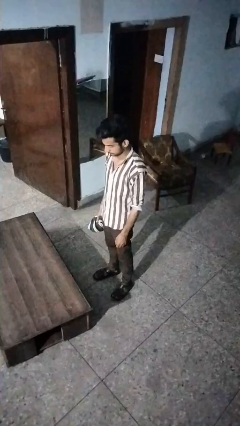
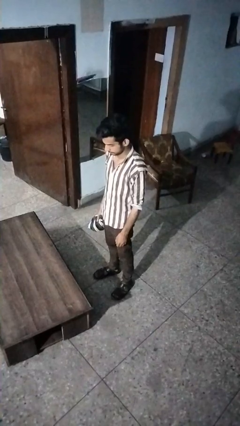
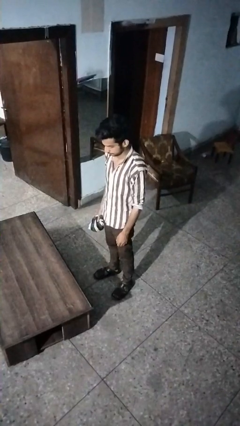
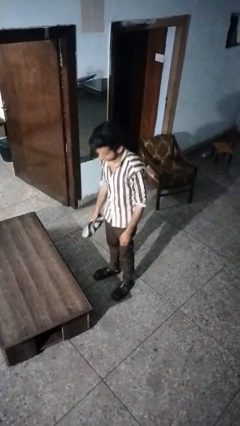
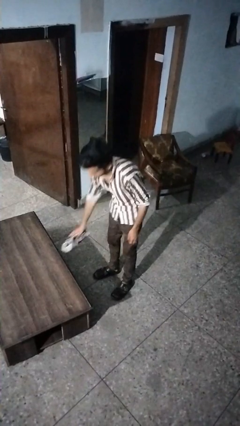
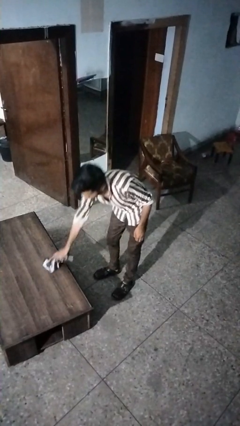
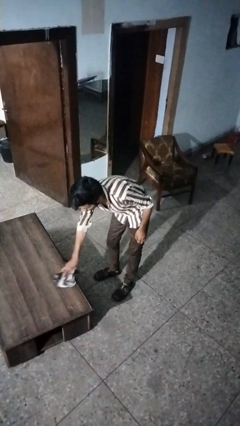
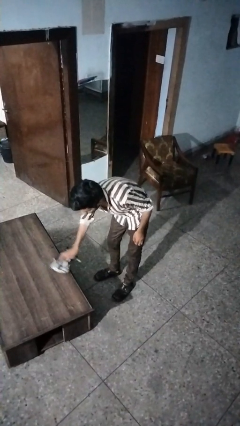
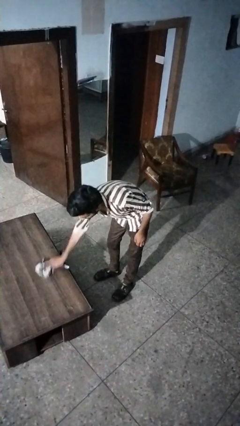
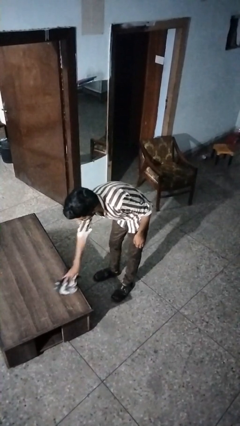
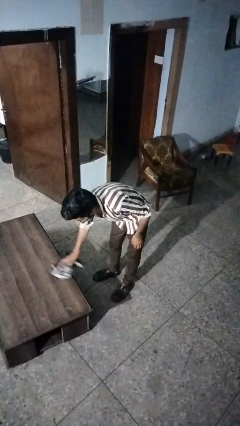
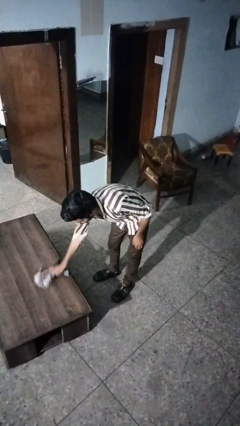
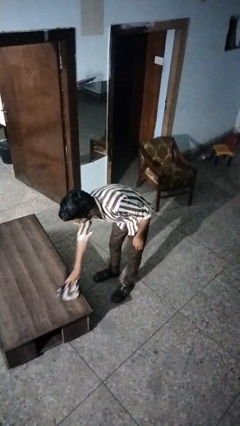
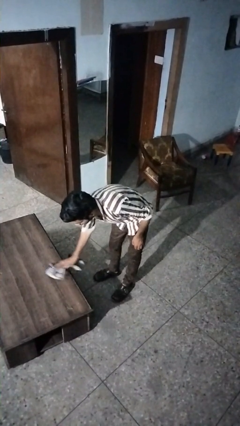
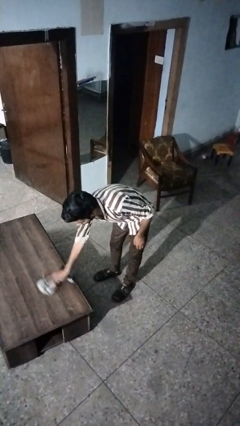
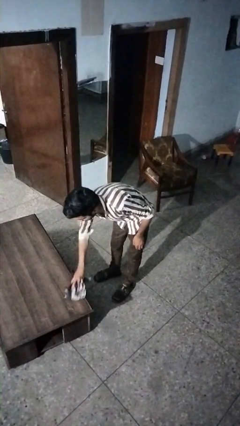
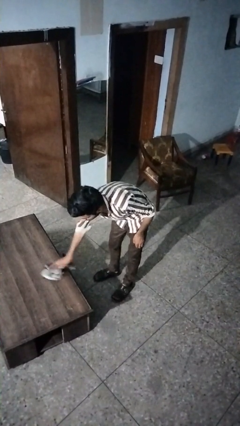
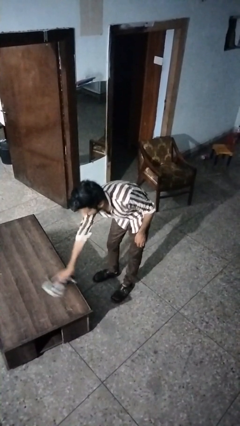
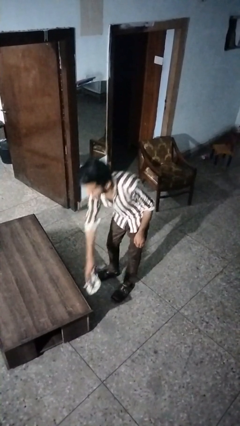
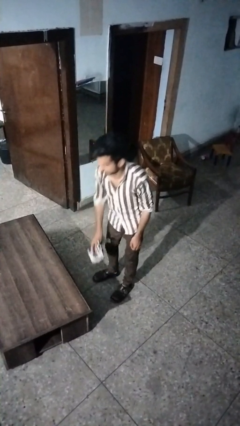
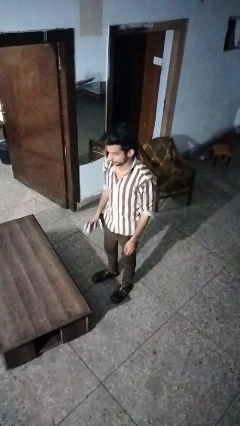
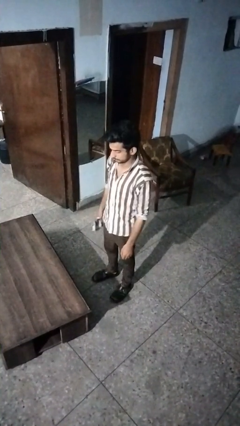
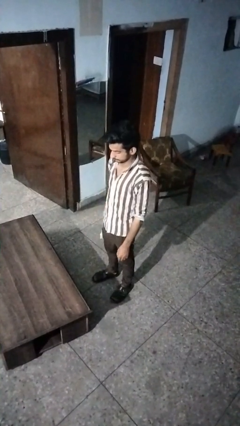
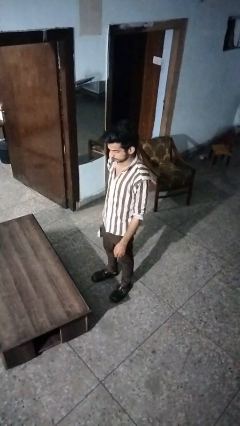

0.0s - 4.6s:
person cleans table with rag

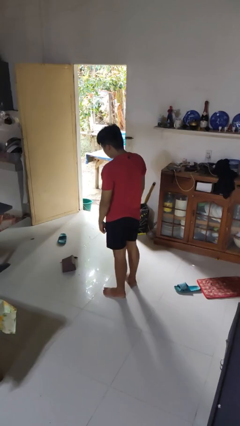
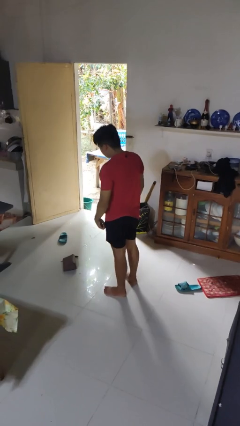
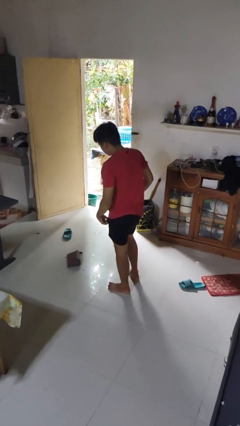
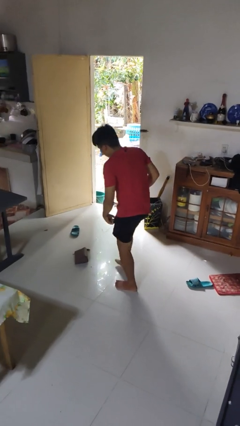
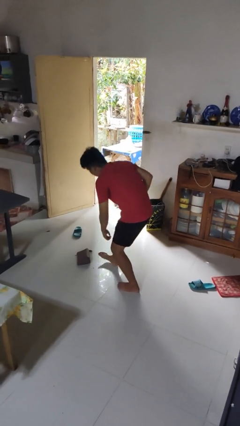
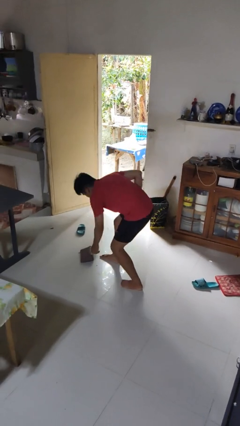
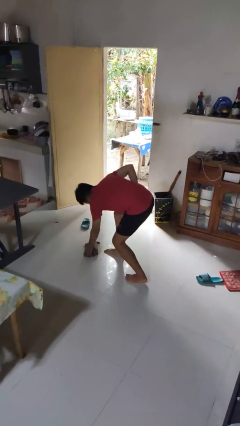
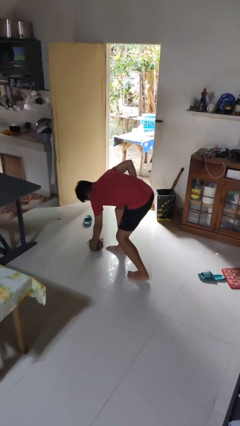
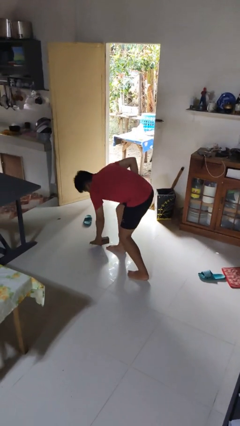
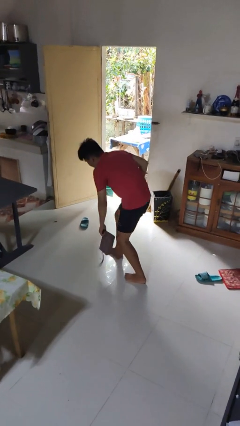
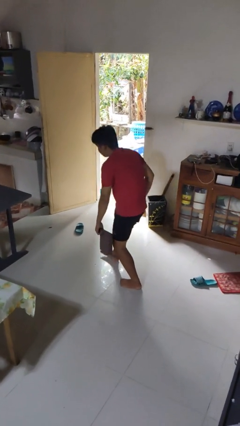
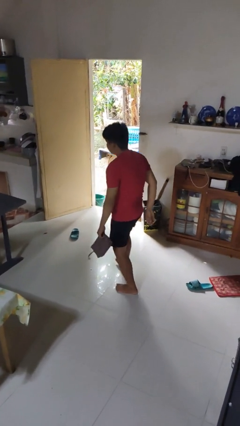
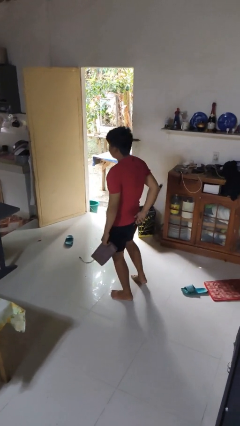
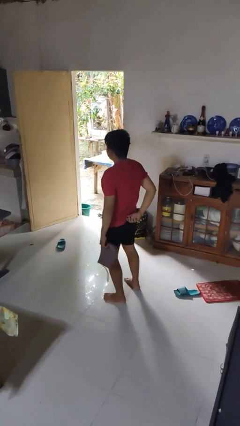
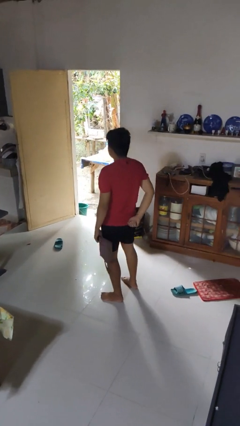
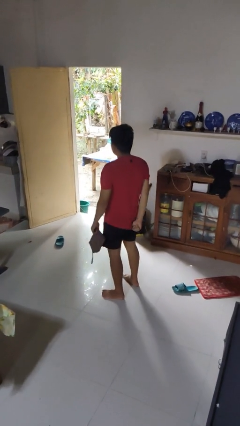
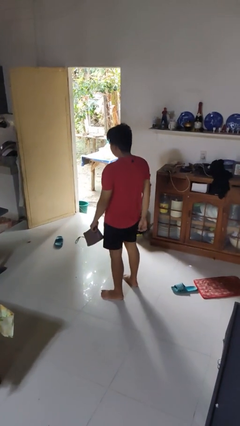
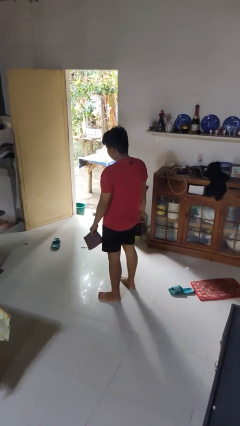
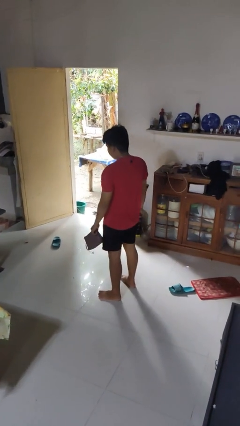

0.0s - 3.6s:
person picks up object from floor

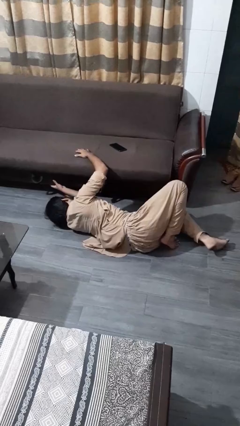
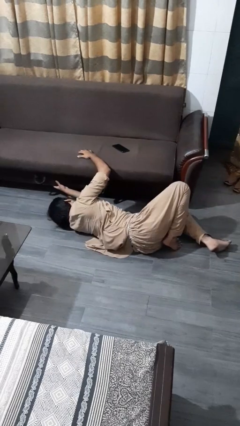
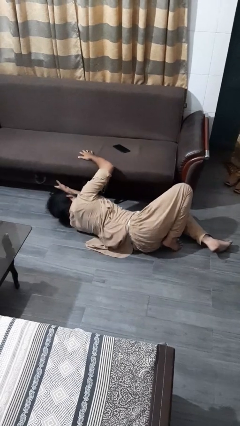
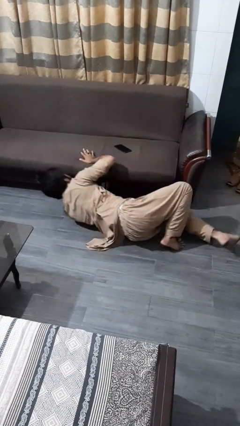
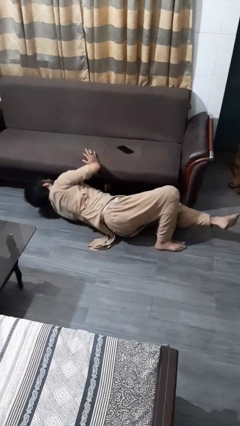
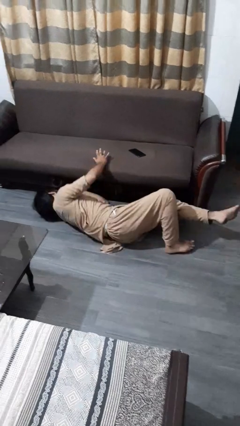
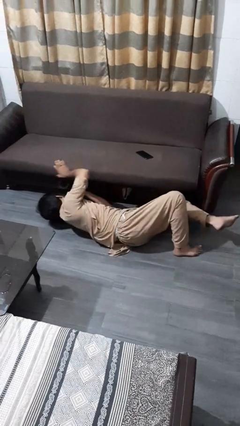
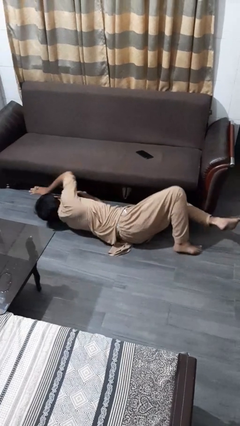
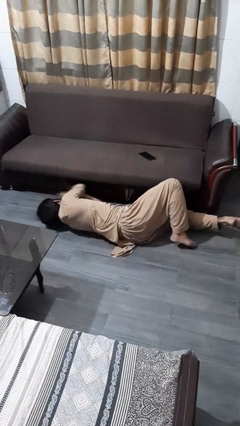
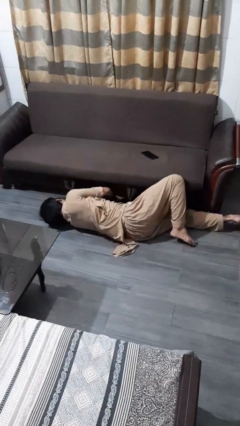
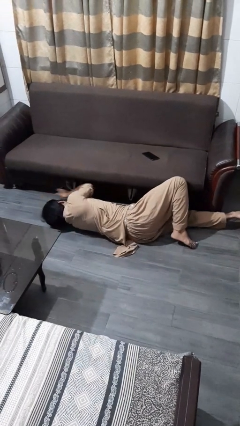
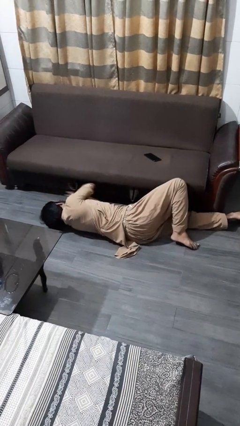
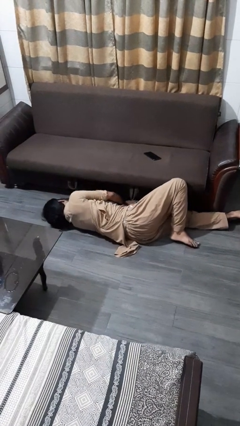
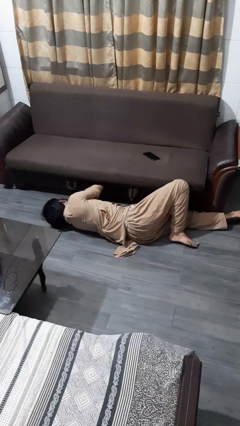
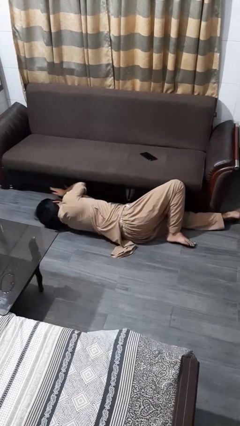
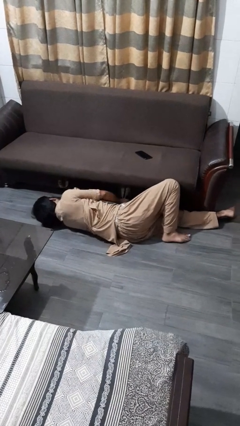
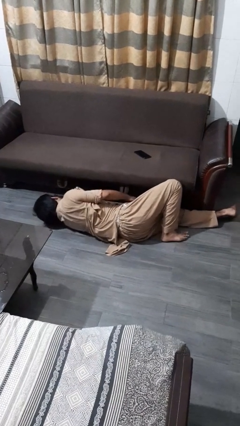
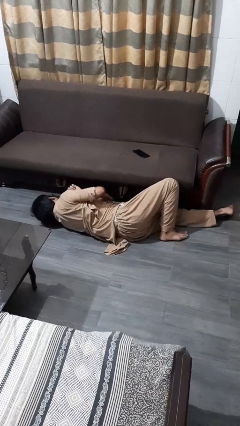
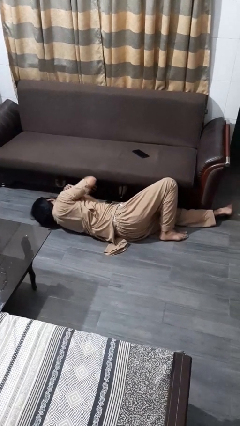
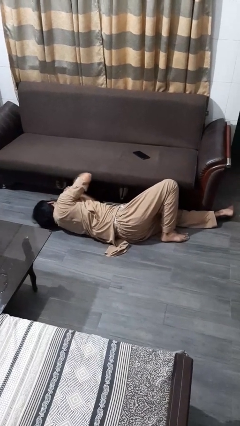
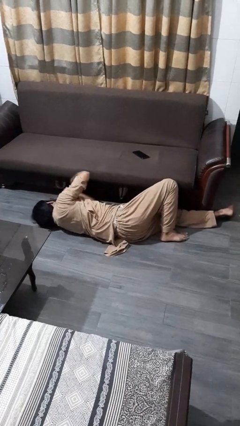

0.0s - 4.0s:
person searches under couch

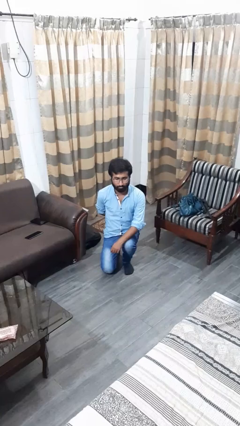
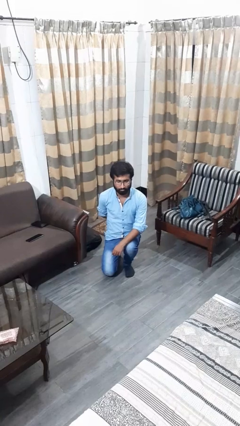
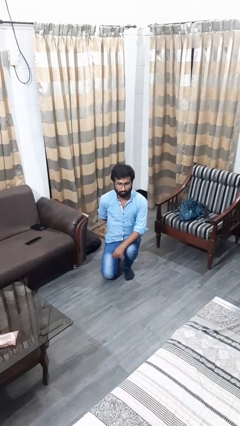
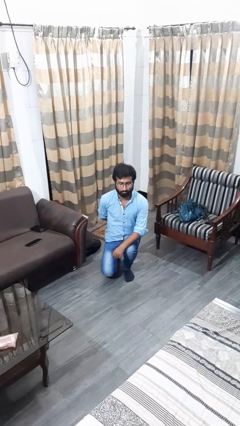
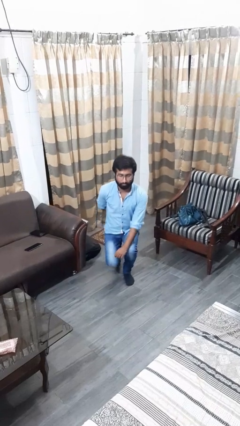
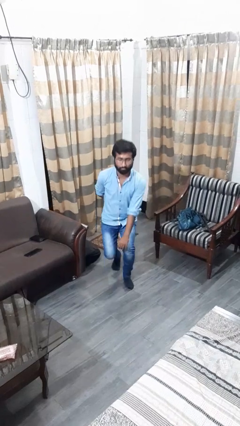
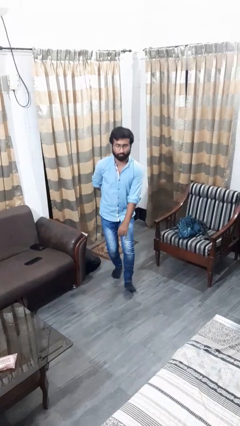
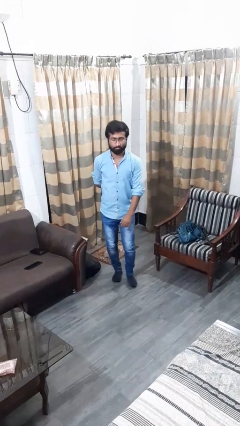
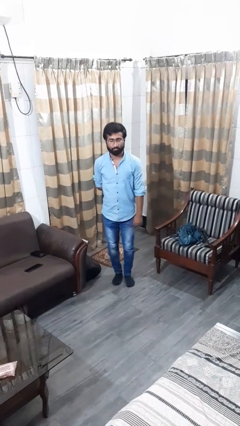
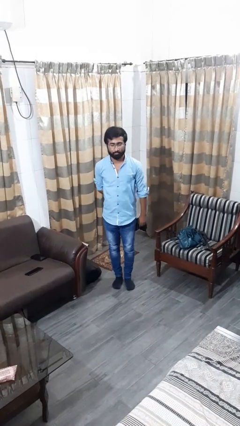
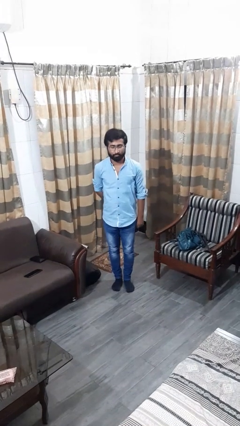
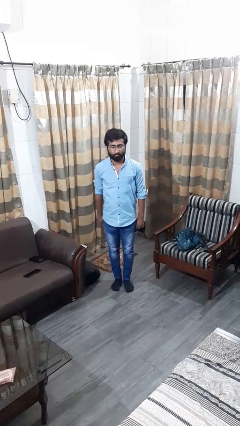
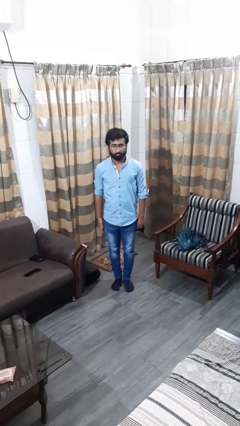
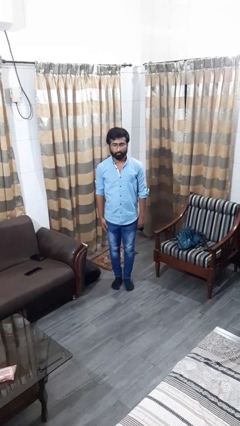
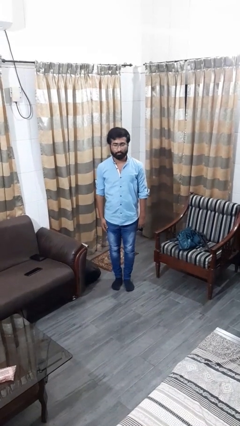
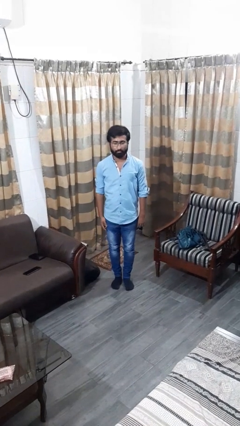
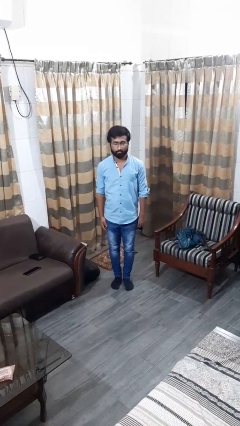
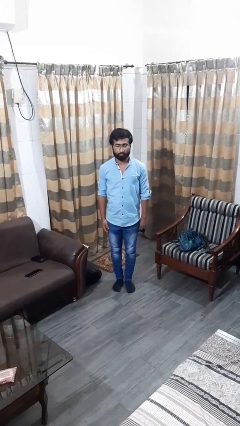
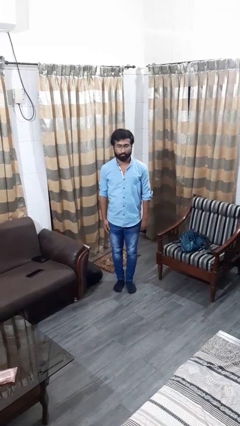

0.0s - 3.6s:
person stands up from floor

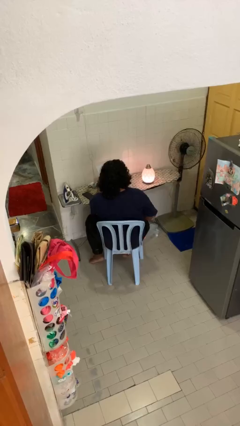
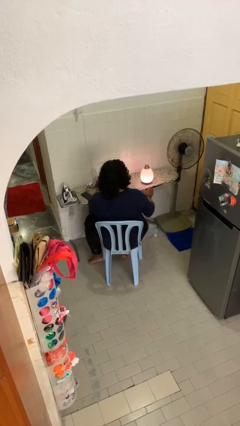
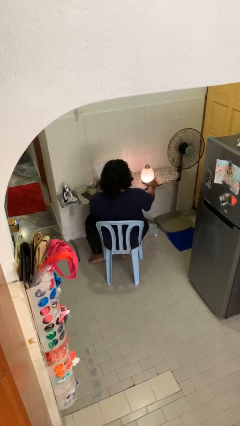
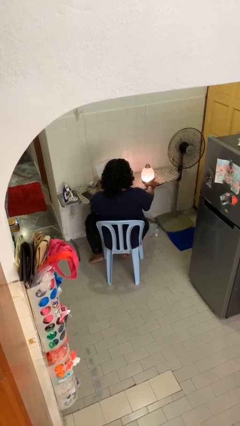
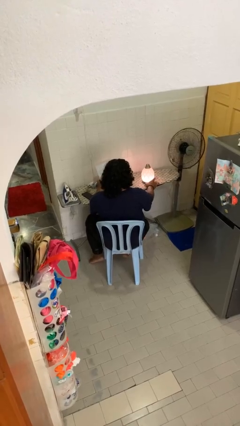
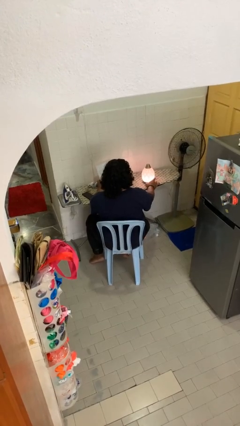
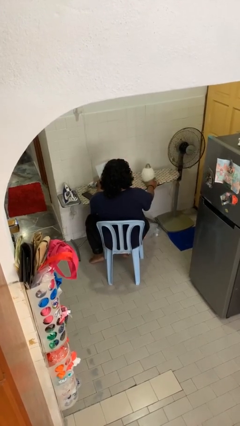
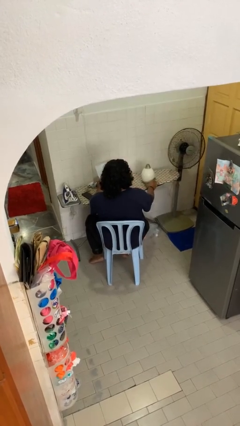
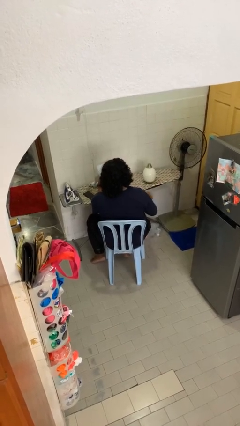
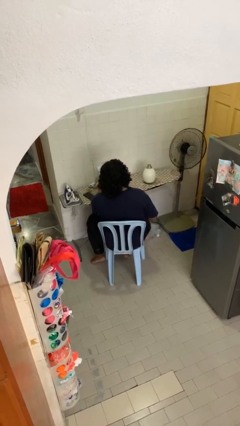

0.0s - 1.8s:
person turns off lamp

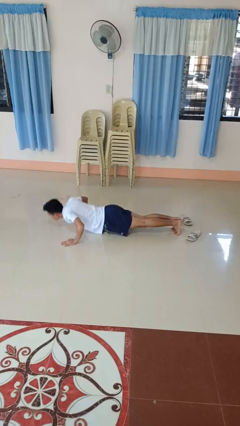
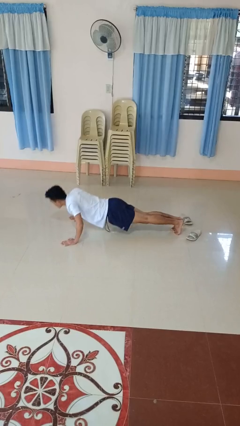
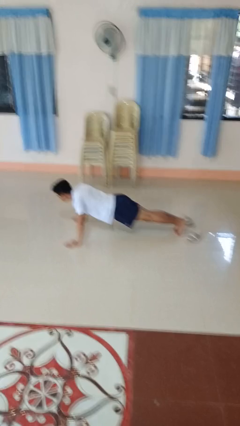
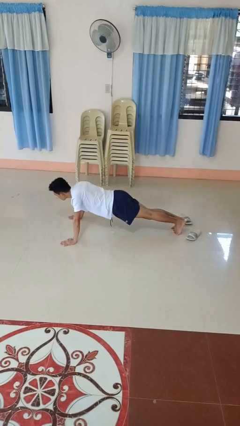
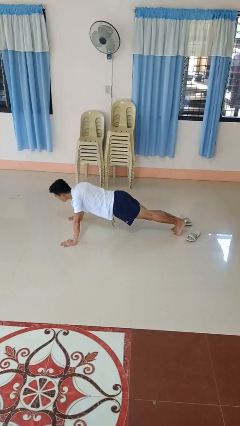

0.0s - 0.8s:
person exercises with pushup
